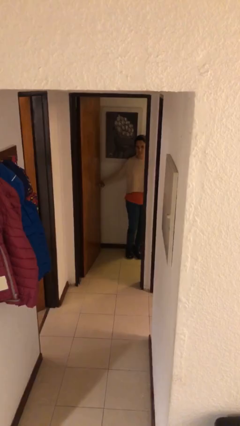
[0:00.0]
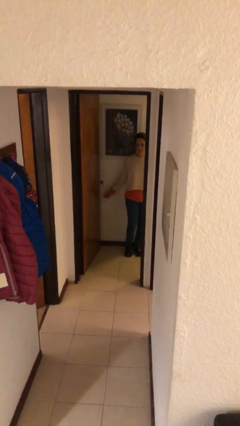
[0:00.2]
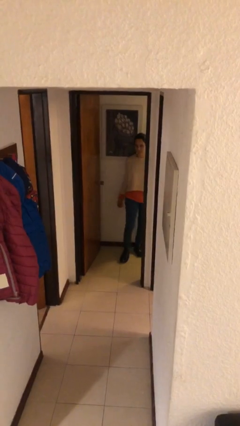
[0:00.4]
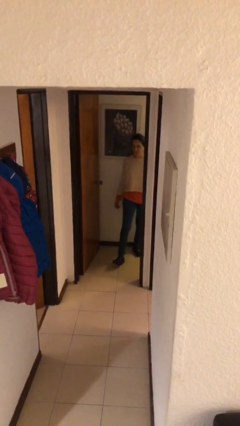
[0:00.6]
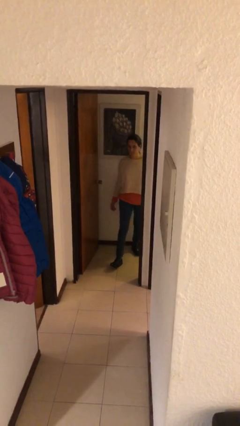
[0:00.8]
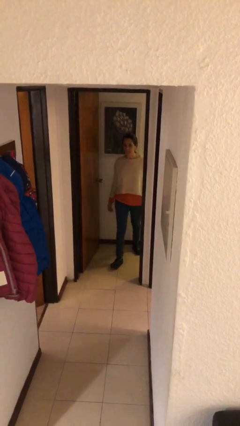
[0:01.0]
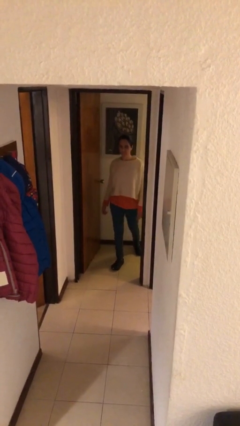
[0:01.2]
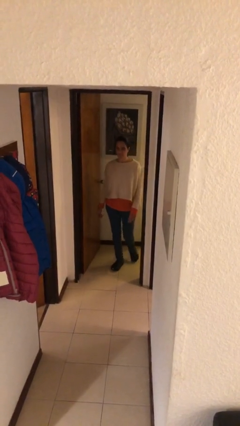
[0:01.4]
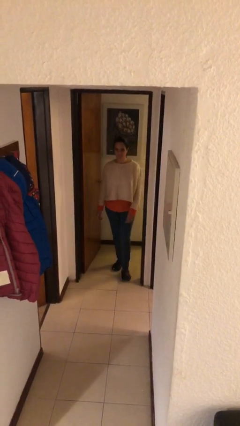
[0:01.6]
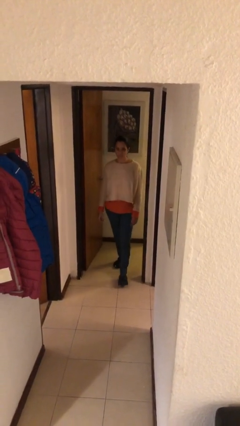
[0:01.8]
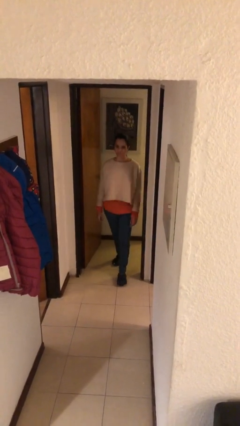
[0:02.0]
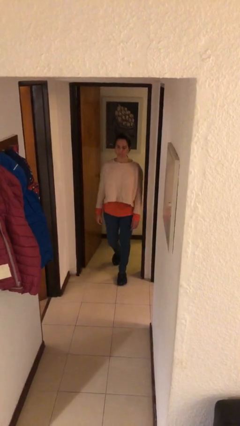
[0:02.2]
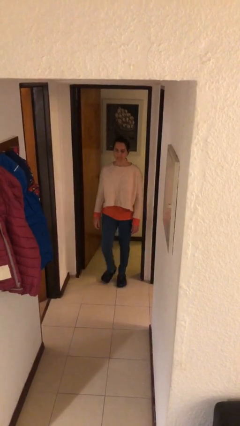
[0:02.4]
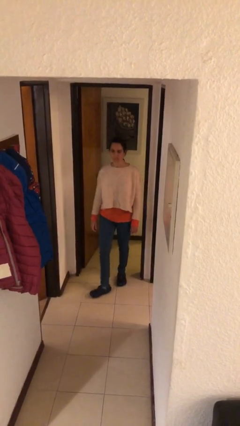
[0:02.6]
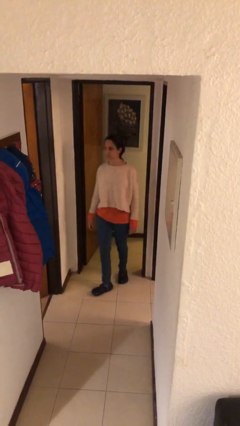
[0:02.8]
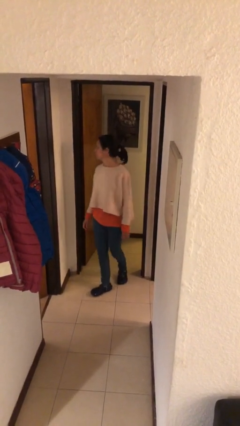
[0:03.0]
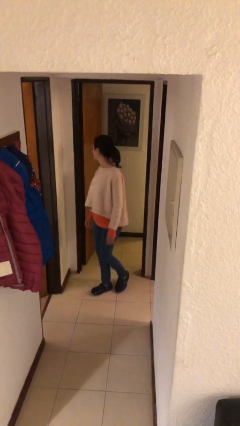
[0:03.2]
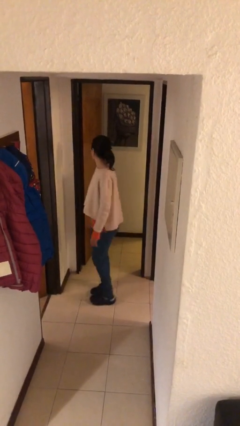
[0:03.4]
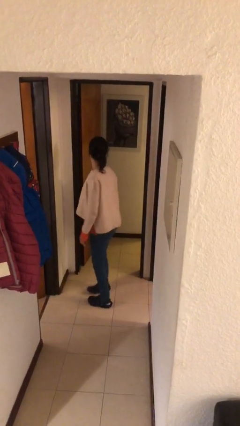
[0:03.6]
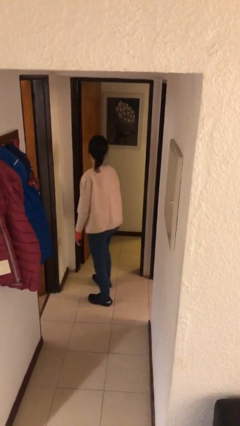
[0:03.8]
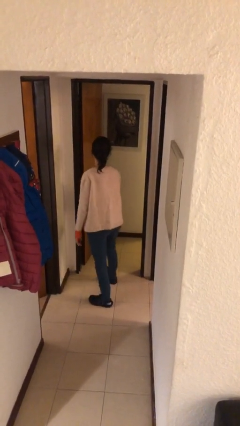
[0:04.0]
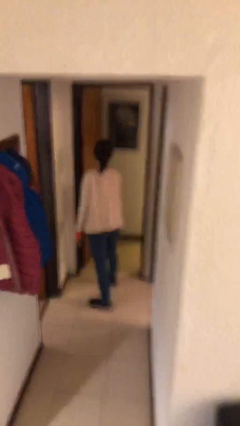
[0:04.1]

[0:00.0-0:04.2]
person enters scene through structure

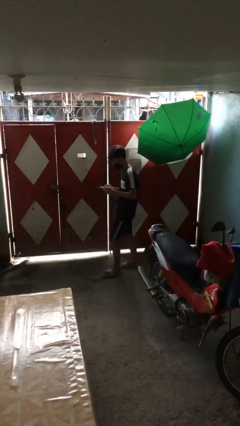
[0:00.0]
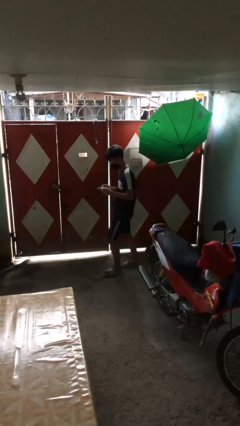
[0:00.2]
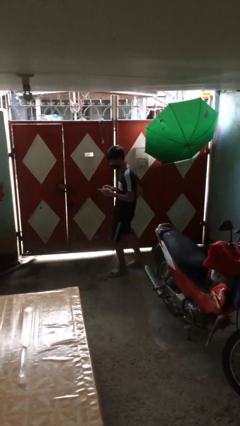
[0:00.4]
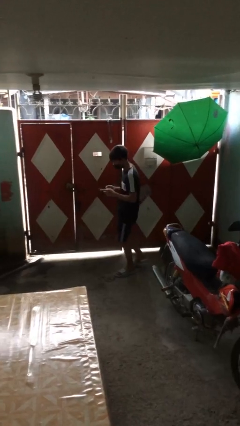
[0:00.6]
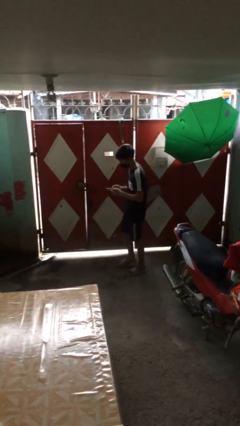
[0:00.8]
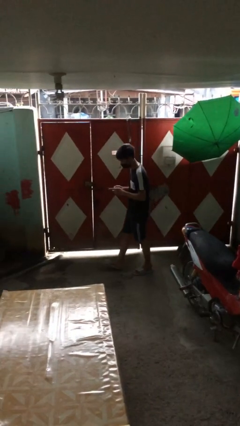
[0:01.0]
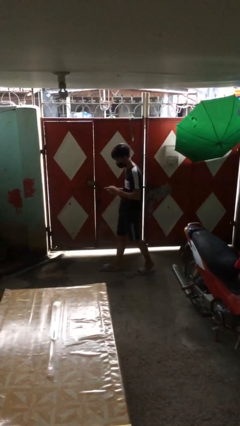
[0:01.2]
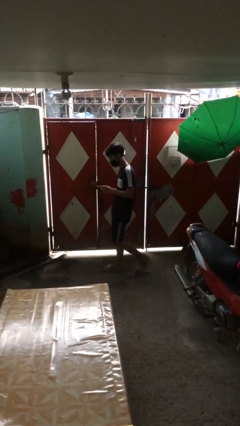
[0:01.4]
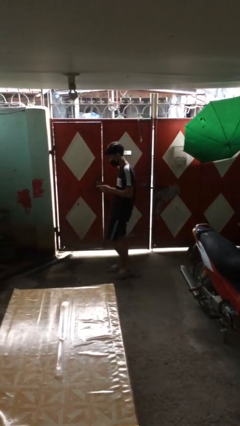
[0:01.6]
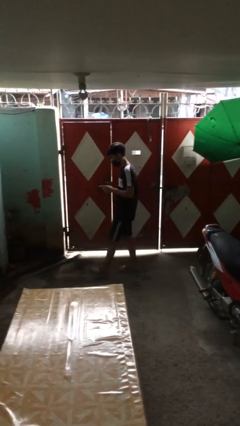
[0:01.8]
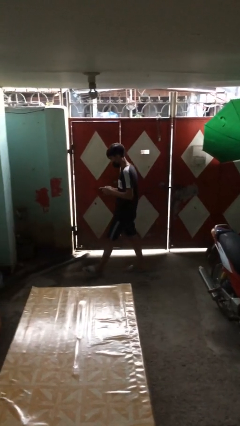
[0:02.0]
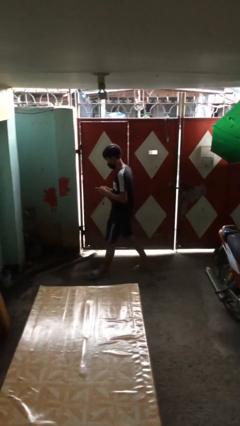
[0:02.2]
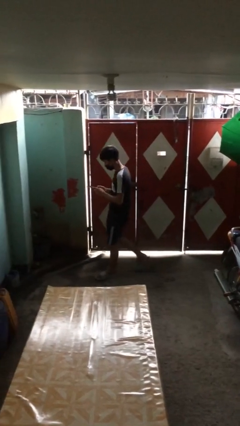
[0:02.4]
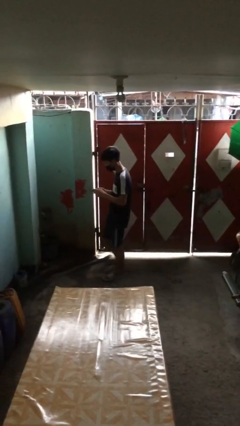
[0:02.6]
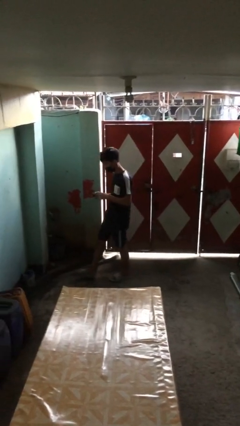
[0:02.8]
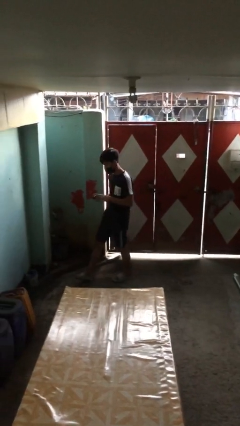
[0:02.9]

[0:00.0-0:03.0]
person texts on phone

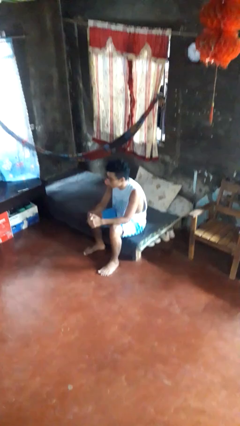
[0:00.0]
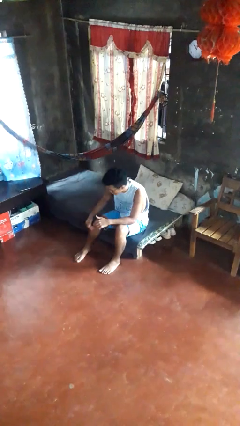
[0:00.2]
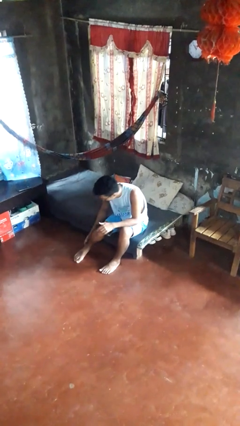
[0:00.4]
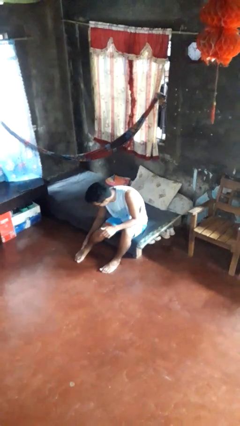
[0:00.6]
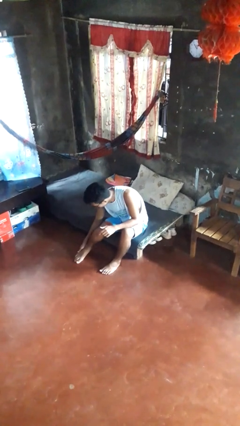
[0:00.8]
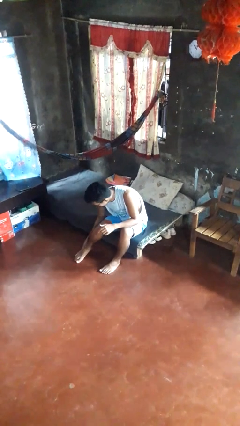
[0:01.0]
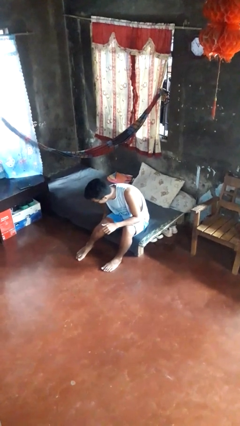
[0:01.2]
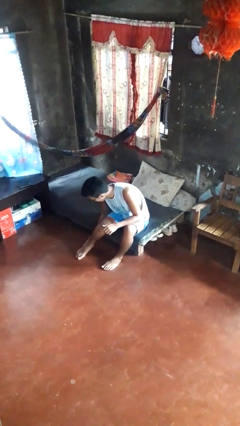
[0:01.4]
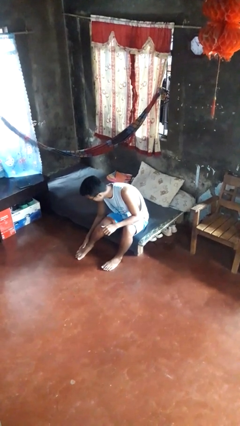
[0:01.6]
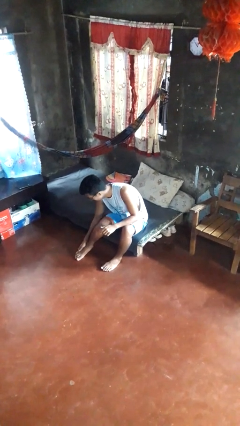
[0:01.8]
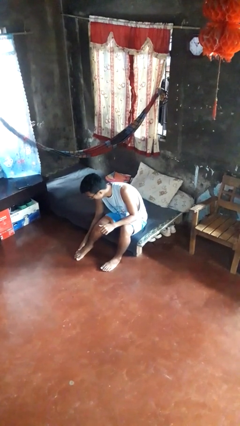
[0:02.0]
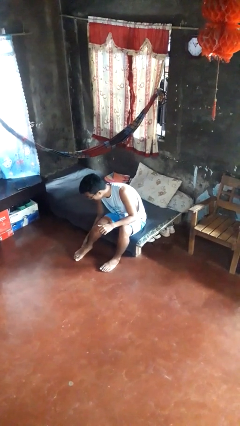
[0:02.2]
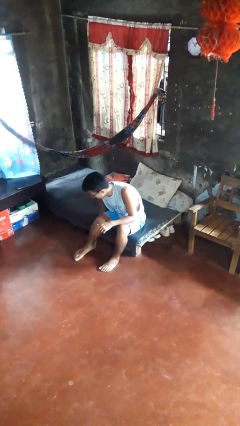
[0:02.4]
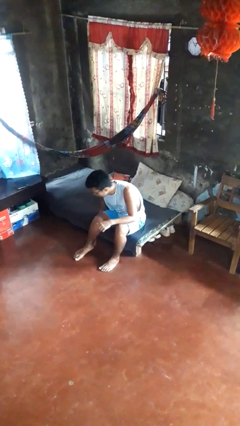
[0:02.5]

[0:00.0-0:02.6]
person rubs foot

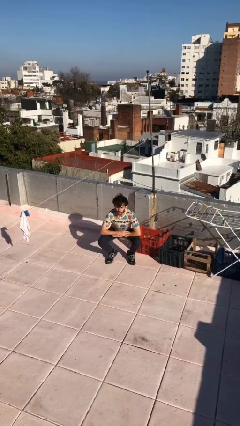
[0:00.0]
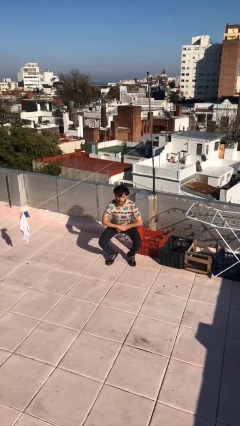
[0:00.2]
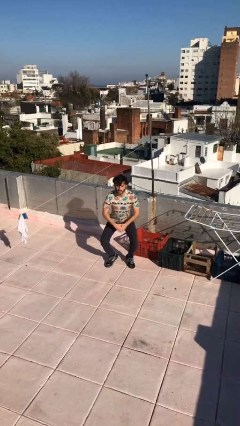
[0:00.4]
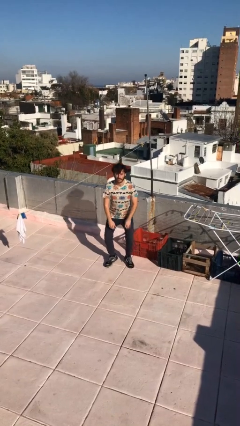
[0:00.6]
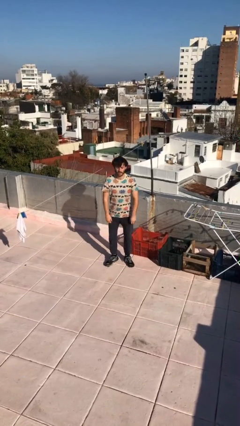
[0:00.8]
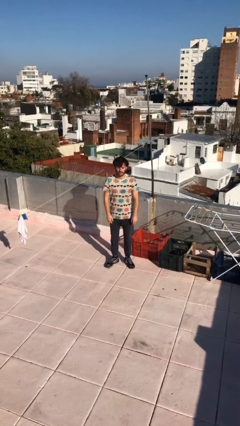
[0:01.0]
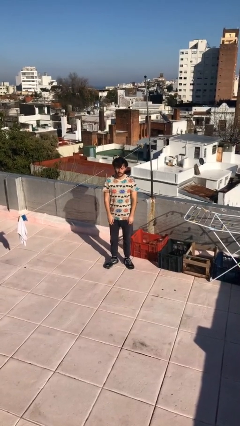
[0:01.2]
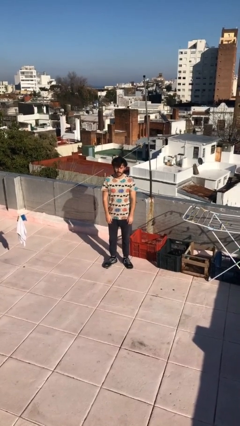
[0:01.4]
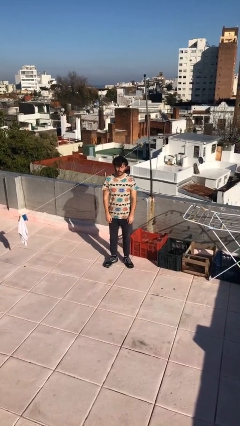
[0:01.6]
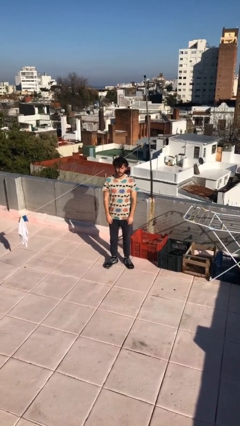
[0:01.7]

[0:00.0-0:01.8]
person stands up

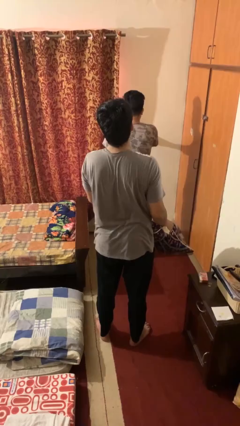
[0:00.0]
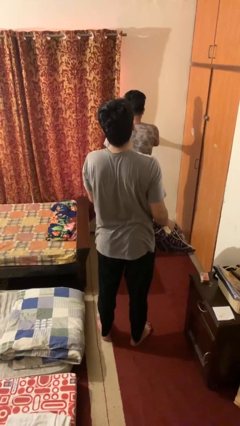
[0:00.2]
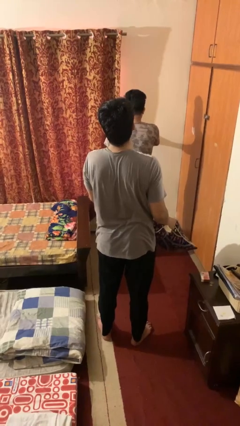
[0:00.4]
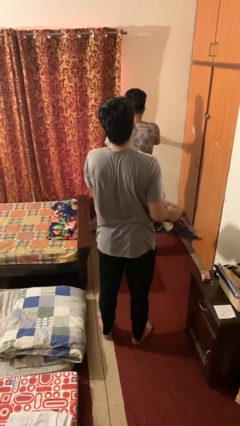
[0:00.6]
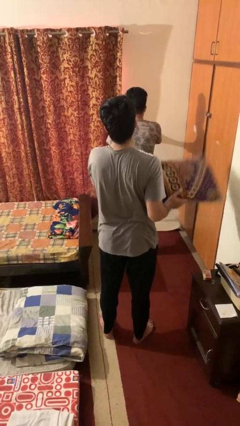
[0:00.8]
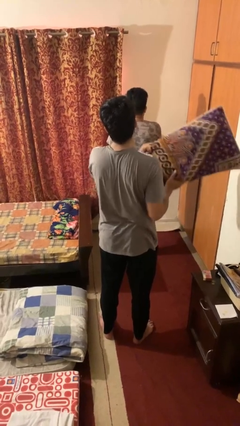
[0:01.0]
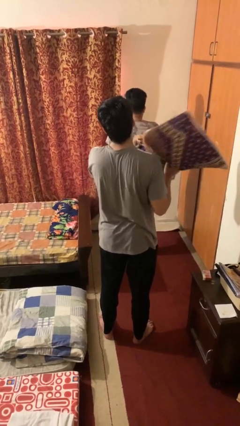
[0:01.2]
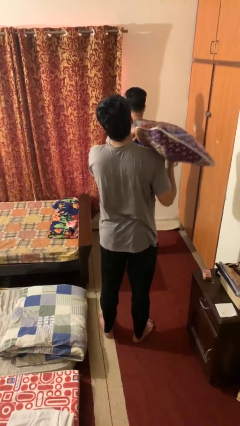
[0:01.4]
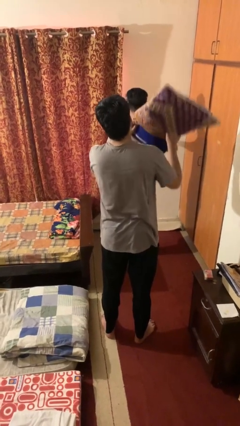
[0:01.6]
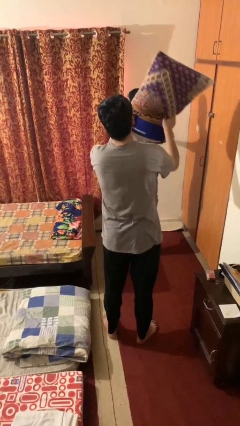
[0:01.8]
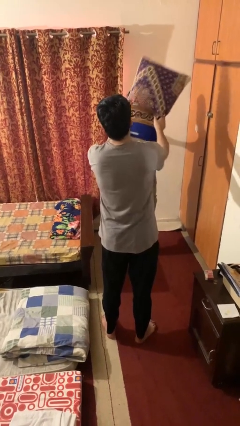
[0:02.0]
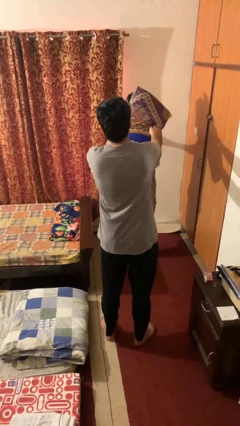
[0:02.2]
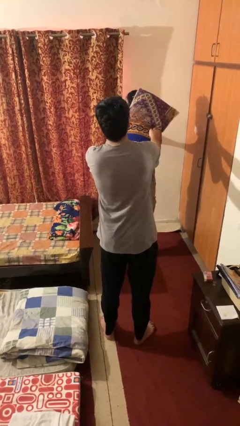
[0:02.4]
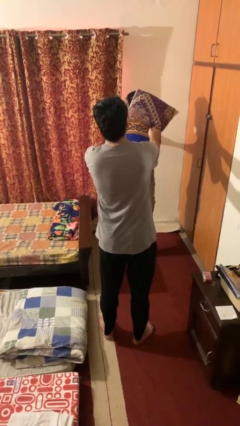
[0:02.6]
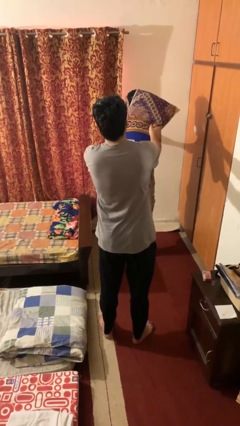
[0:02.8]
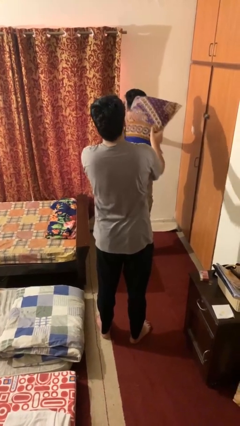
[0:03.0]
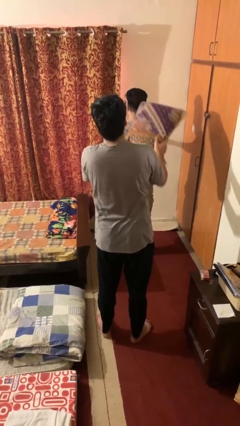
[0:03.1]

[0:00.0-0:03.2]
person hits person with pillow

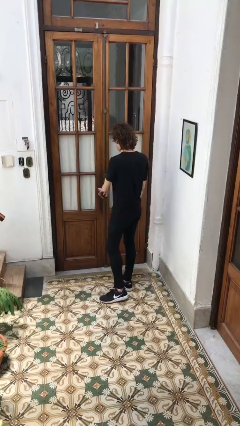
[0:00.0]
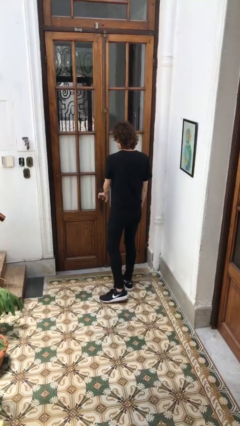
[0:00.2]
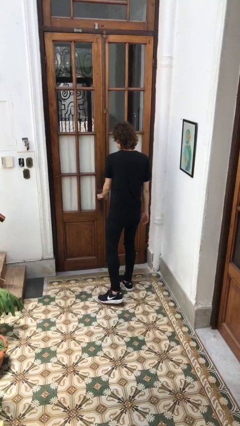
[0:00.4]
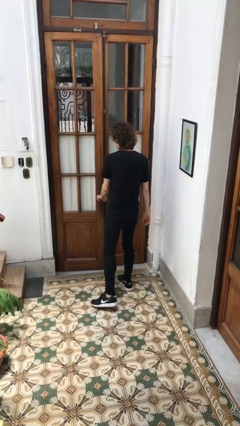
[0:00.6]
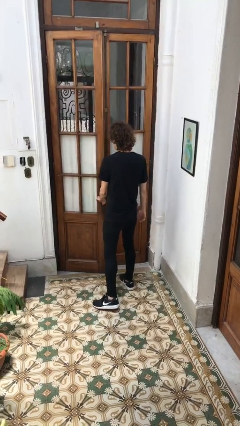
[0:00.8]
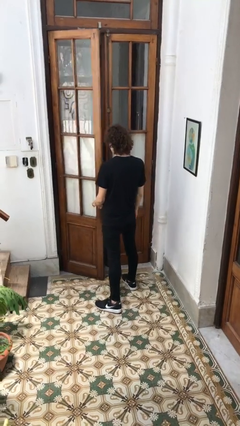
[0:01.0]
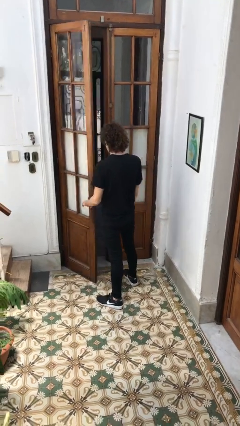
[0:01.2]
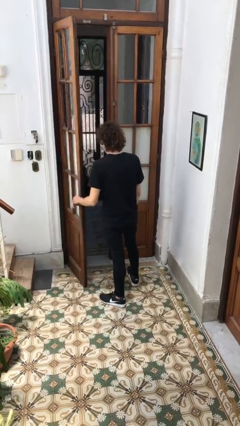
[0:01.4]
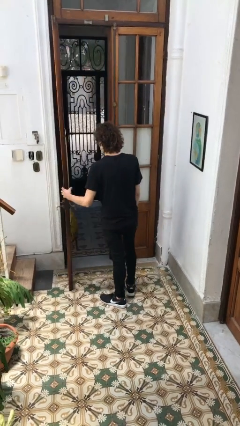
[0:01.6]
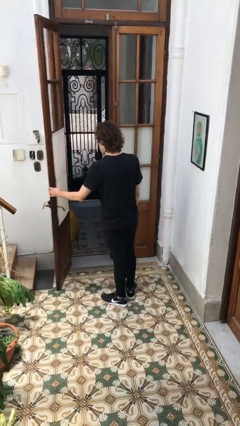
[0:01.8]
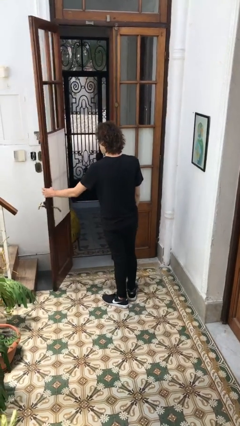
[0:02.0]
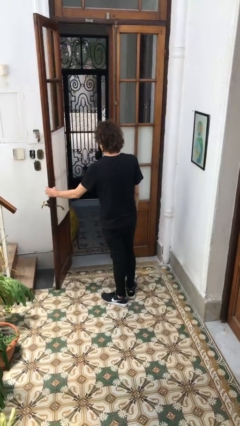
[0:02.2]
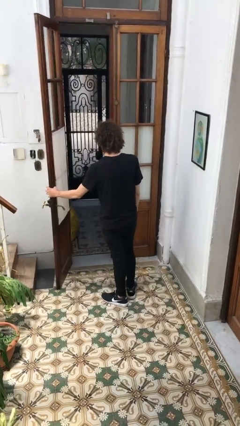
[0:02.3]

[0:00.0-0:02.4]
person opens facility door
